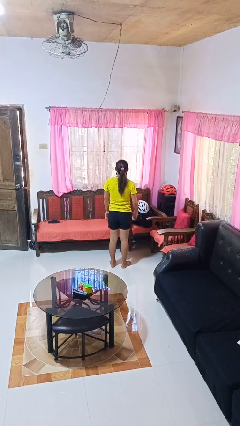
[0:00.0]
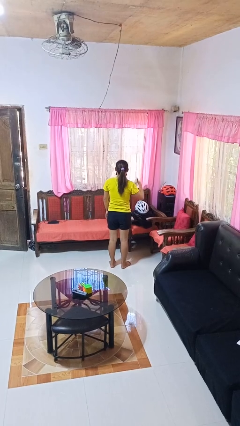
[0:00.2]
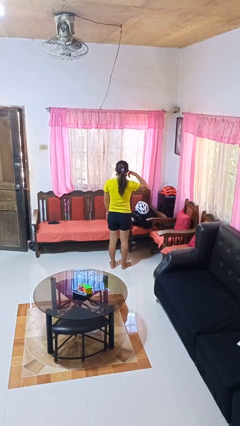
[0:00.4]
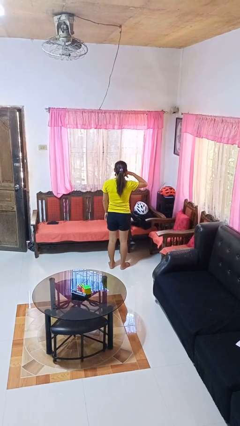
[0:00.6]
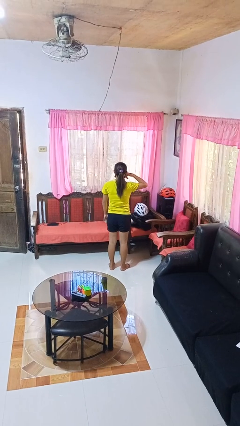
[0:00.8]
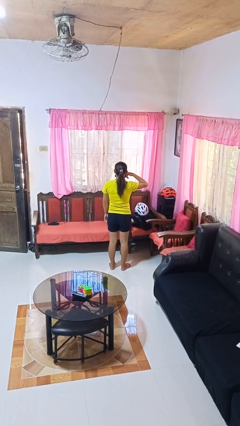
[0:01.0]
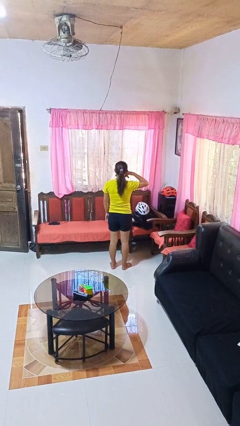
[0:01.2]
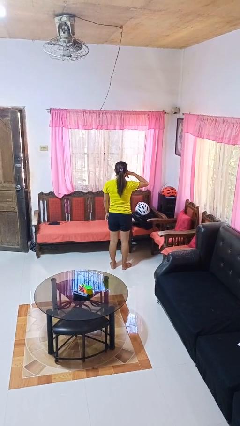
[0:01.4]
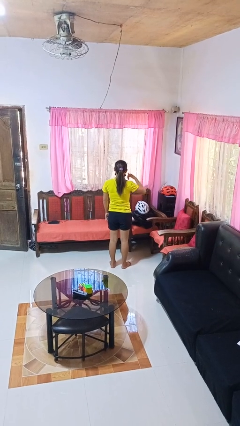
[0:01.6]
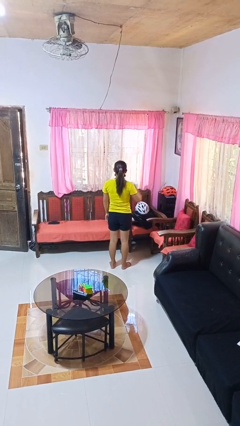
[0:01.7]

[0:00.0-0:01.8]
person gestures call me

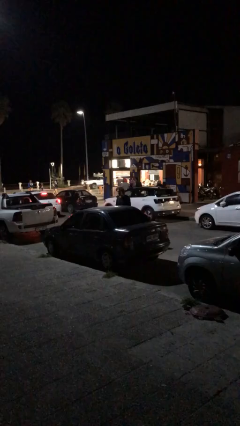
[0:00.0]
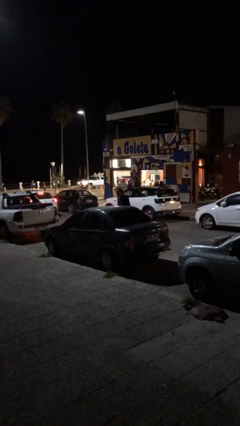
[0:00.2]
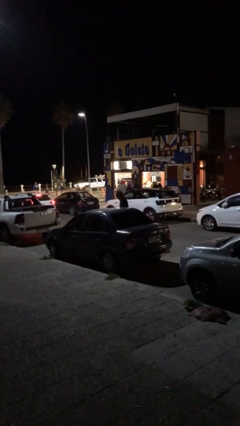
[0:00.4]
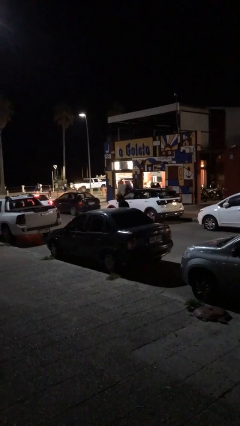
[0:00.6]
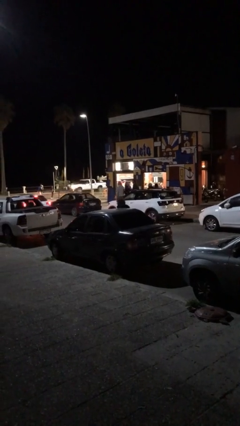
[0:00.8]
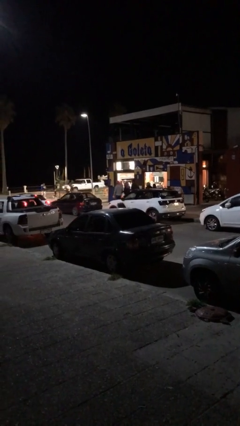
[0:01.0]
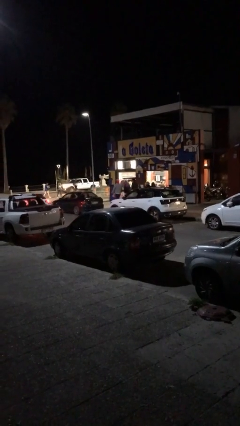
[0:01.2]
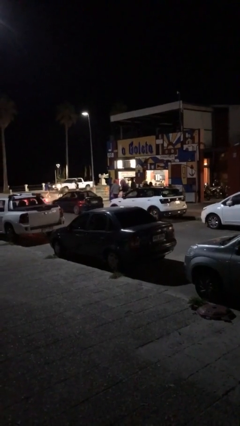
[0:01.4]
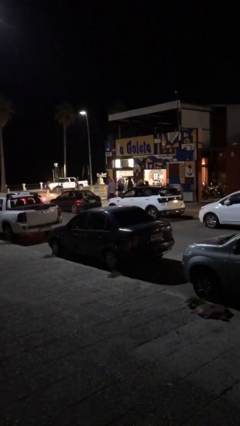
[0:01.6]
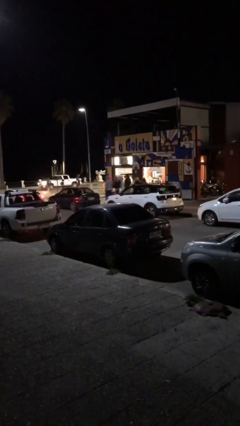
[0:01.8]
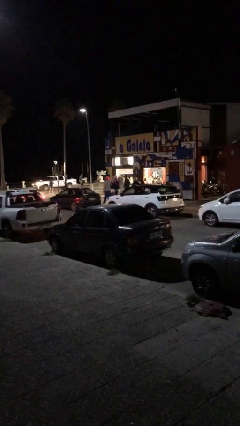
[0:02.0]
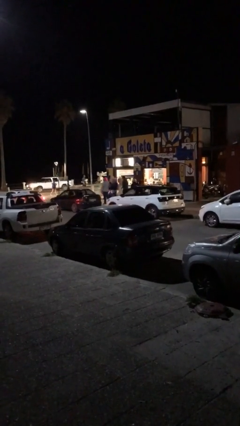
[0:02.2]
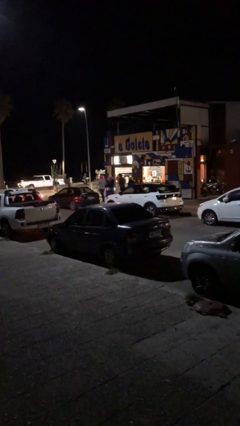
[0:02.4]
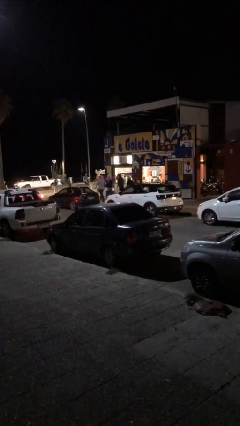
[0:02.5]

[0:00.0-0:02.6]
person enters car

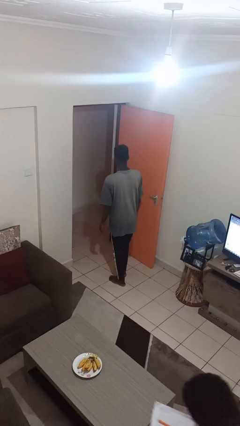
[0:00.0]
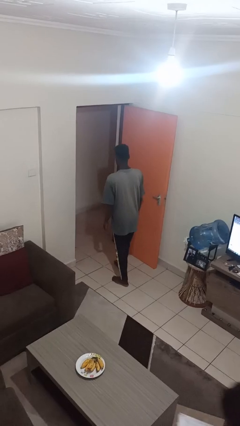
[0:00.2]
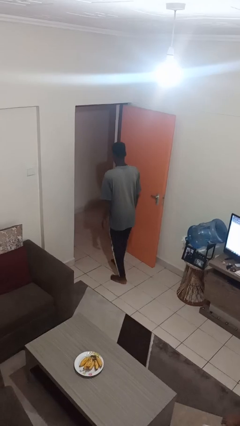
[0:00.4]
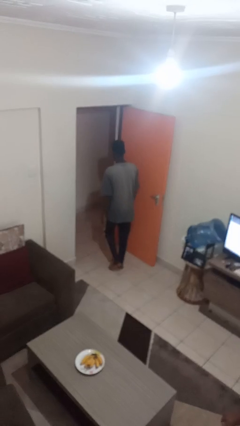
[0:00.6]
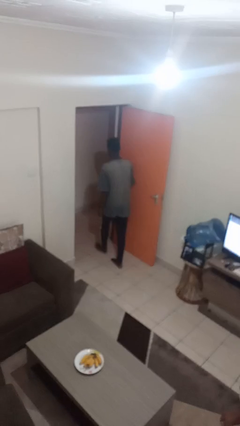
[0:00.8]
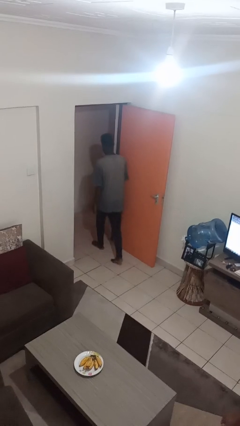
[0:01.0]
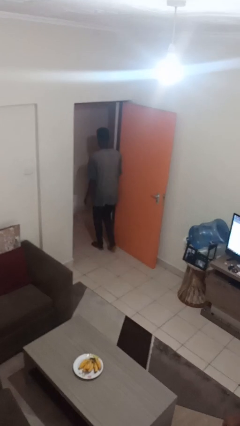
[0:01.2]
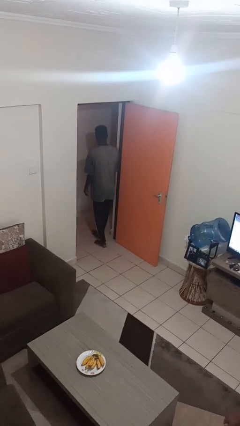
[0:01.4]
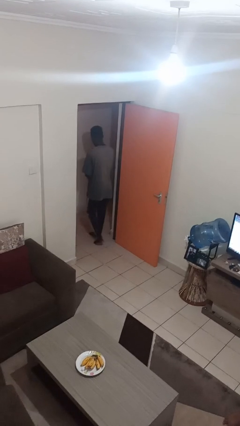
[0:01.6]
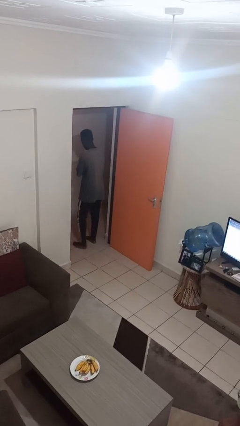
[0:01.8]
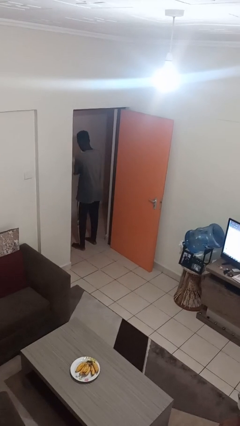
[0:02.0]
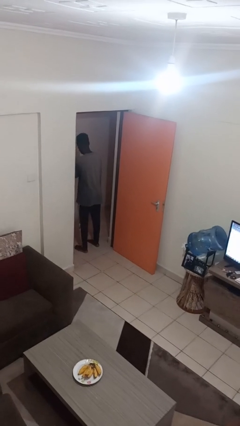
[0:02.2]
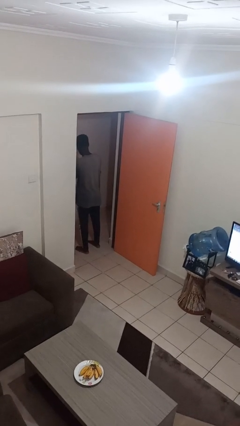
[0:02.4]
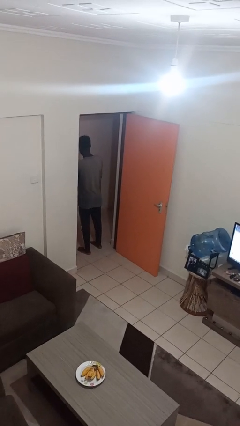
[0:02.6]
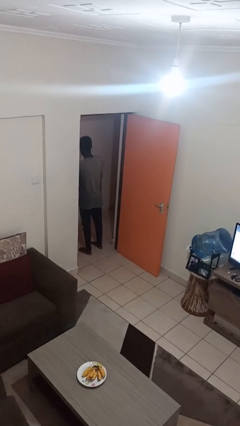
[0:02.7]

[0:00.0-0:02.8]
person bumps into wall

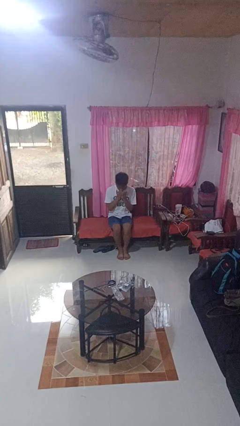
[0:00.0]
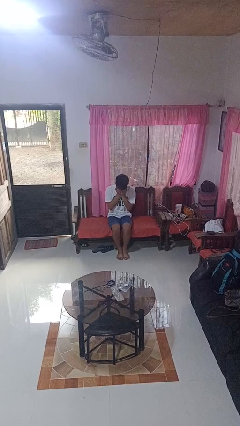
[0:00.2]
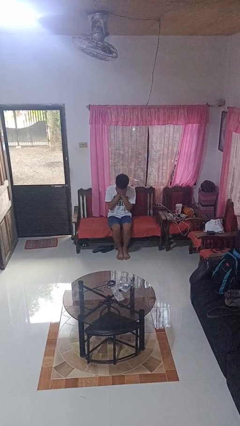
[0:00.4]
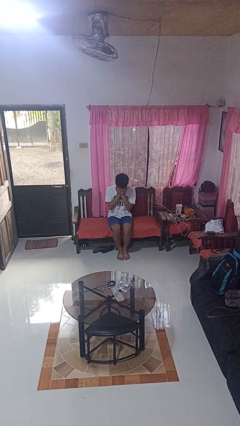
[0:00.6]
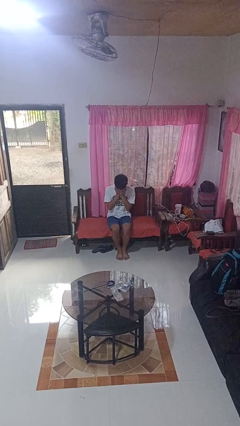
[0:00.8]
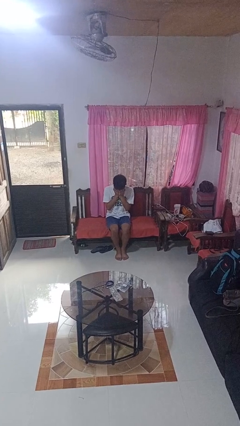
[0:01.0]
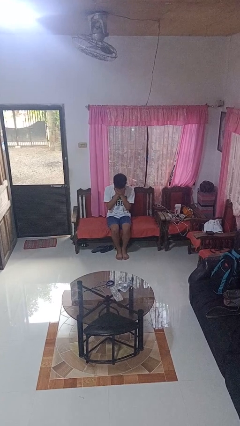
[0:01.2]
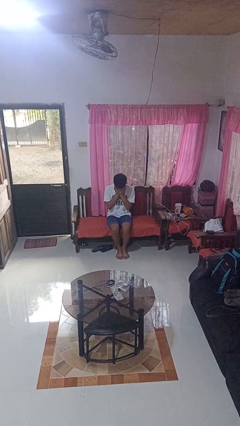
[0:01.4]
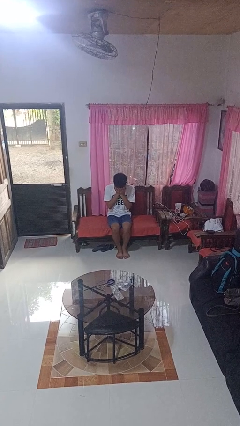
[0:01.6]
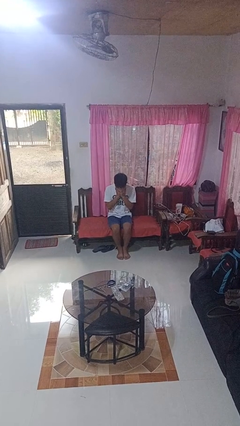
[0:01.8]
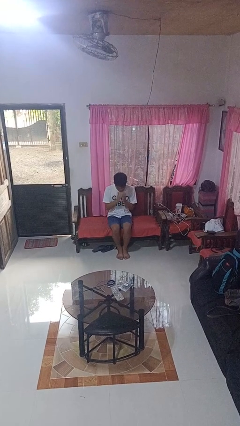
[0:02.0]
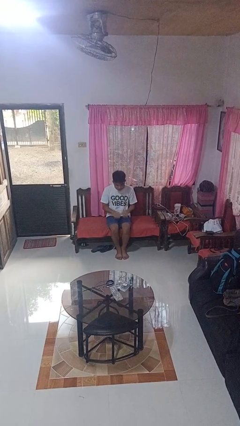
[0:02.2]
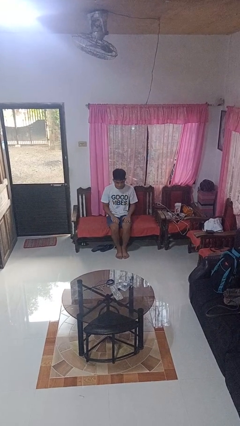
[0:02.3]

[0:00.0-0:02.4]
person covers face with hands

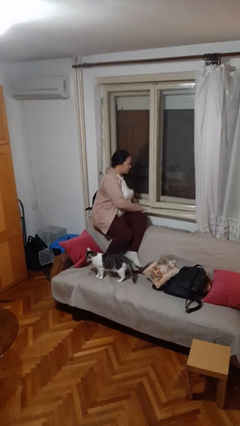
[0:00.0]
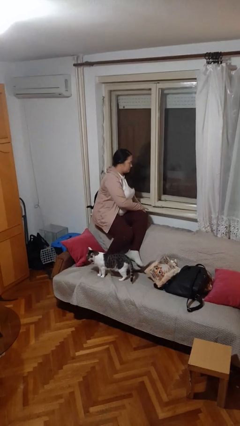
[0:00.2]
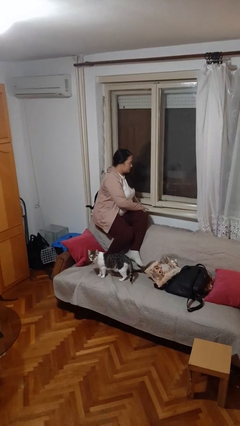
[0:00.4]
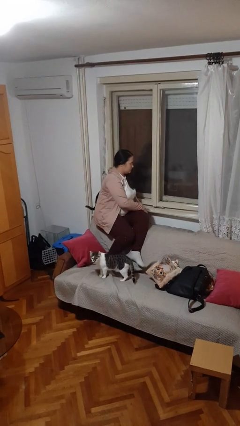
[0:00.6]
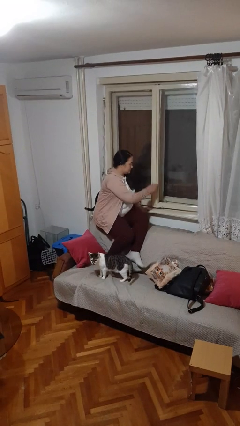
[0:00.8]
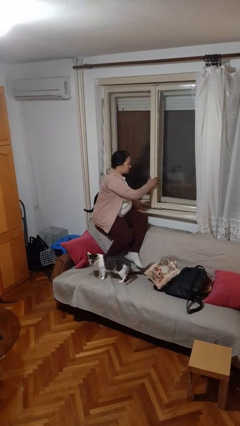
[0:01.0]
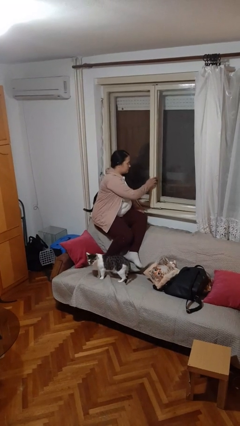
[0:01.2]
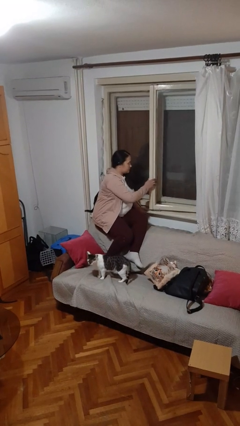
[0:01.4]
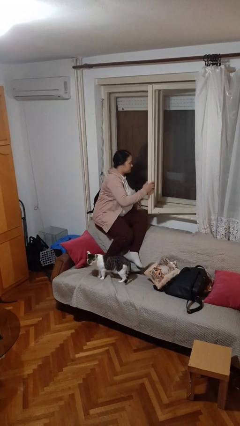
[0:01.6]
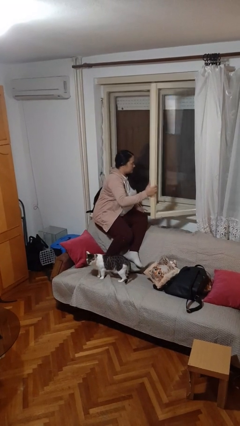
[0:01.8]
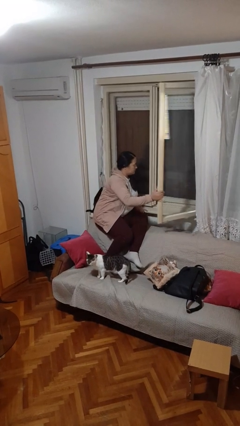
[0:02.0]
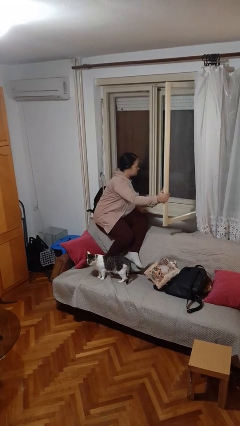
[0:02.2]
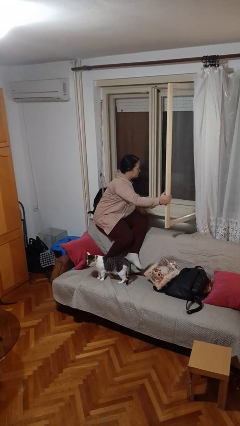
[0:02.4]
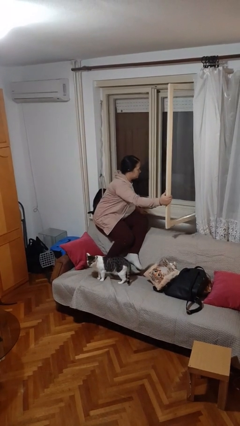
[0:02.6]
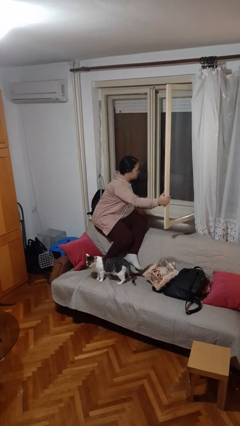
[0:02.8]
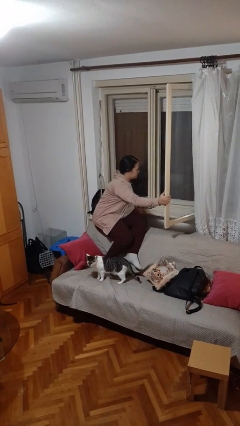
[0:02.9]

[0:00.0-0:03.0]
person opens home window

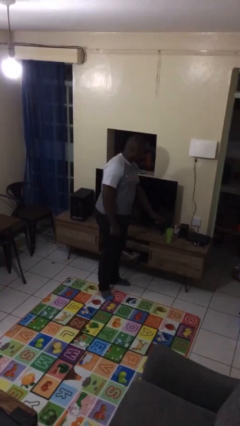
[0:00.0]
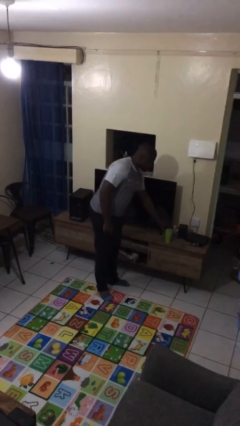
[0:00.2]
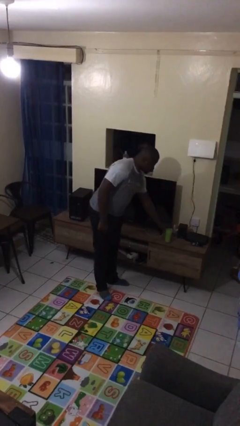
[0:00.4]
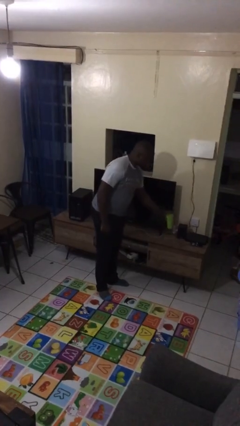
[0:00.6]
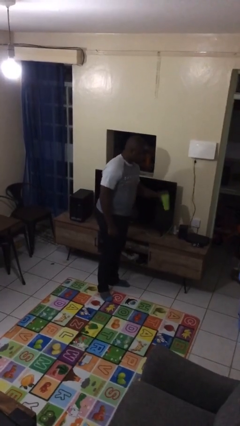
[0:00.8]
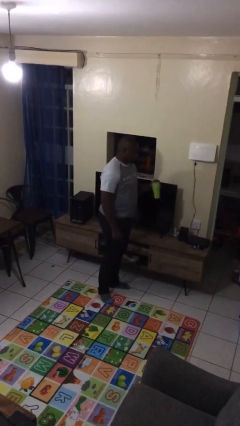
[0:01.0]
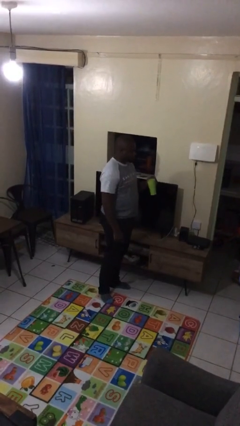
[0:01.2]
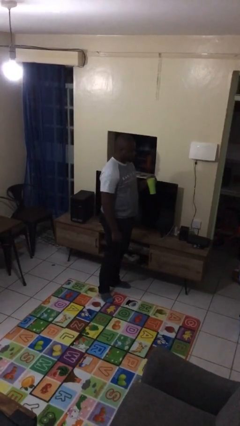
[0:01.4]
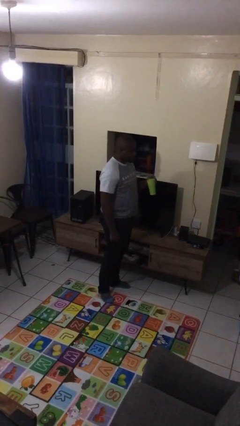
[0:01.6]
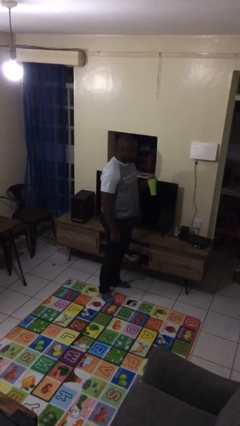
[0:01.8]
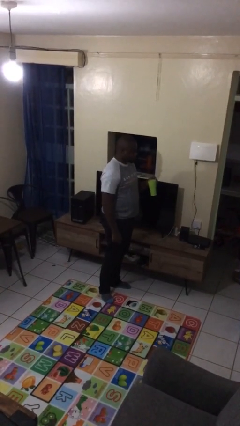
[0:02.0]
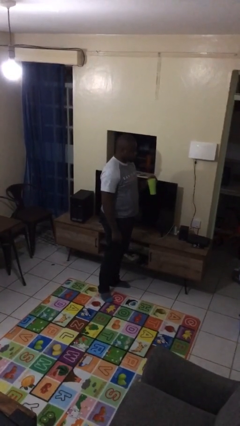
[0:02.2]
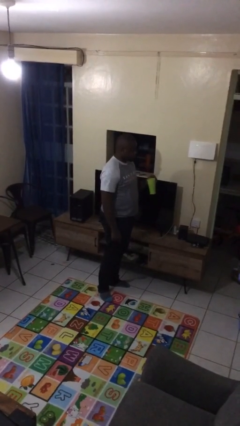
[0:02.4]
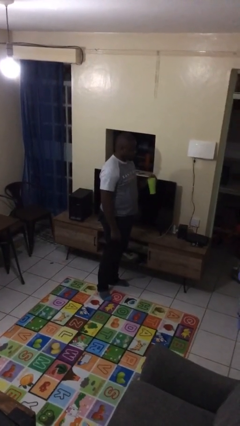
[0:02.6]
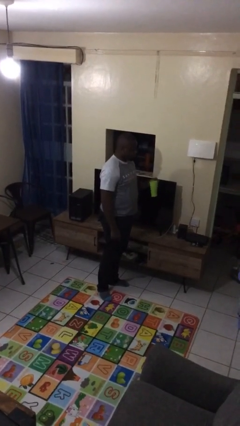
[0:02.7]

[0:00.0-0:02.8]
person picks up object from countertop

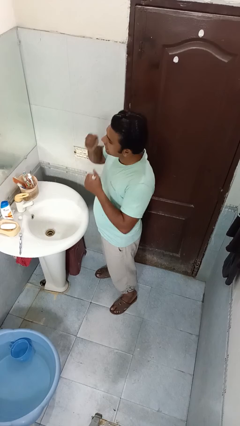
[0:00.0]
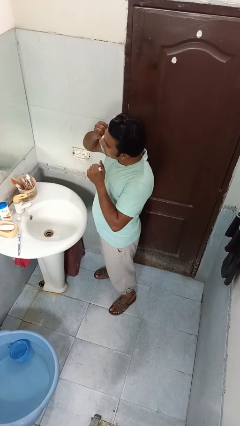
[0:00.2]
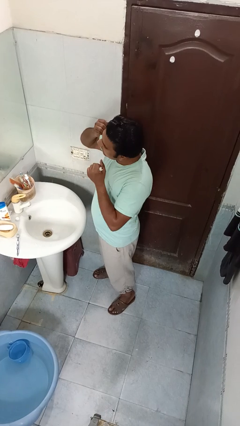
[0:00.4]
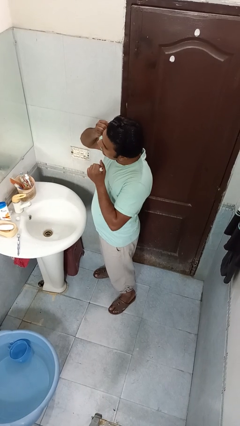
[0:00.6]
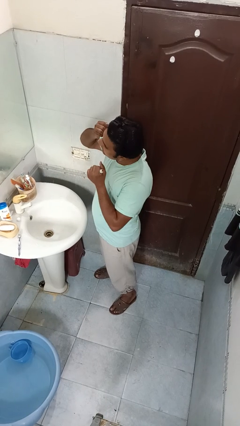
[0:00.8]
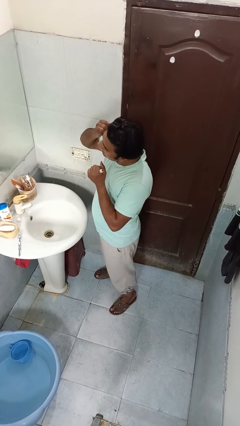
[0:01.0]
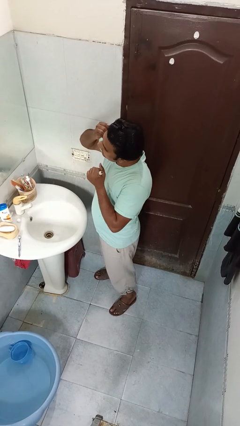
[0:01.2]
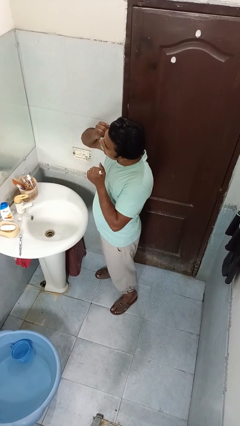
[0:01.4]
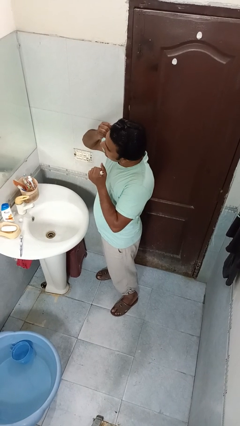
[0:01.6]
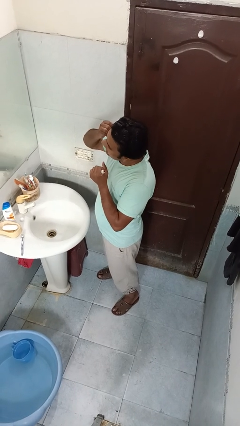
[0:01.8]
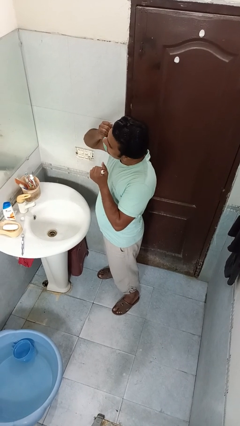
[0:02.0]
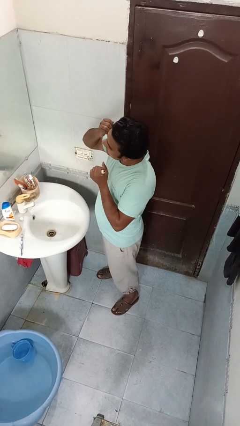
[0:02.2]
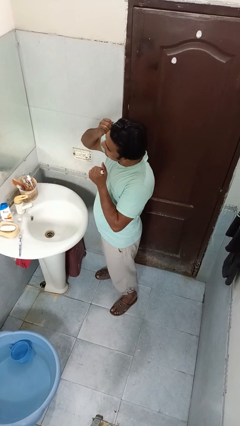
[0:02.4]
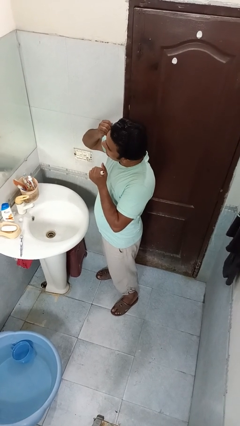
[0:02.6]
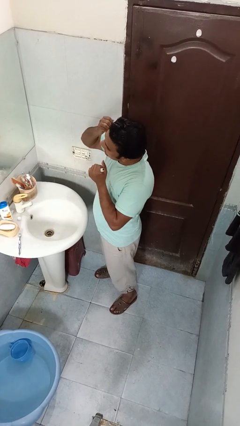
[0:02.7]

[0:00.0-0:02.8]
person flosses
